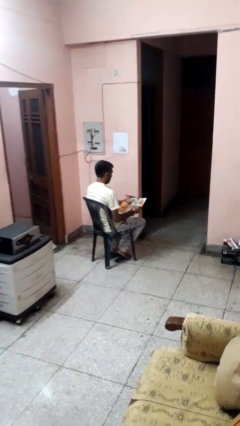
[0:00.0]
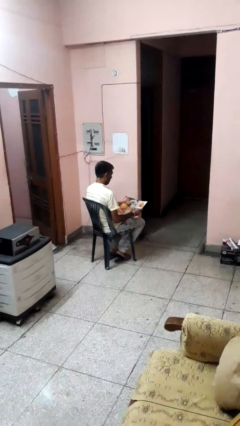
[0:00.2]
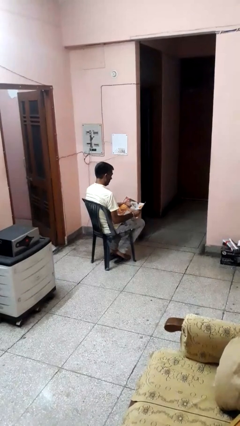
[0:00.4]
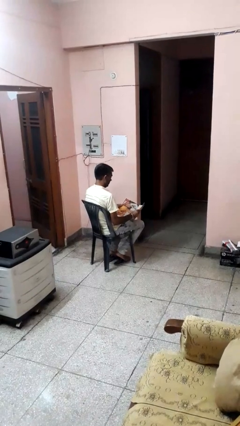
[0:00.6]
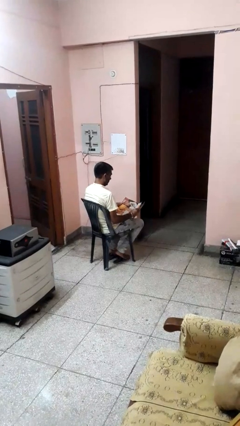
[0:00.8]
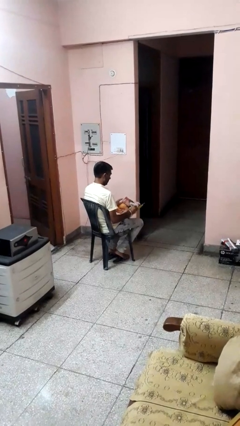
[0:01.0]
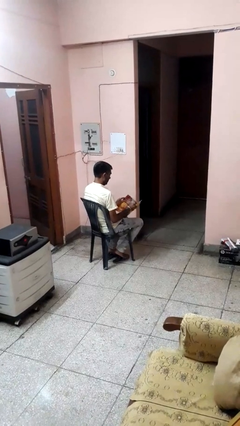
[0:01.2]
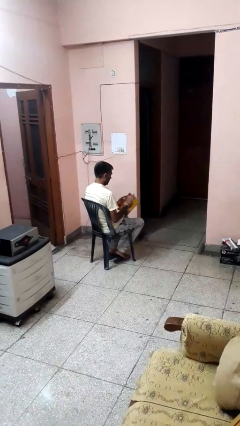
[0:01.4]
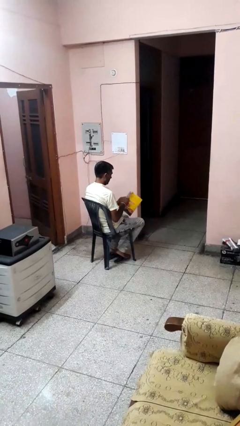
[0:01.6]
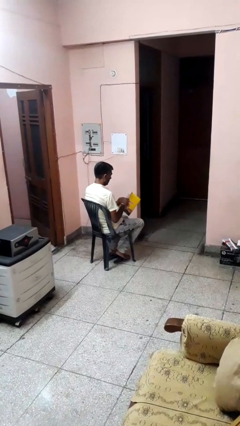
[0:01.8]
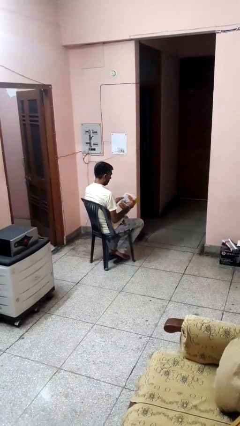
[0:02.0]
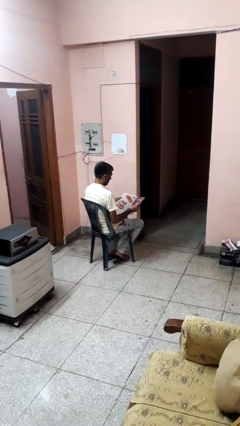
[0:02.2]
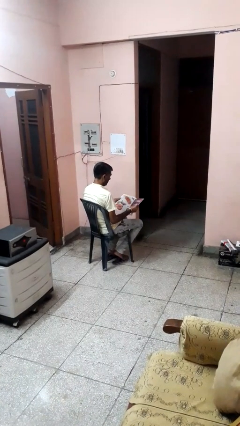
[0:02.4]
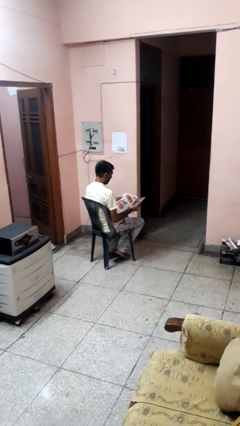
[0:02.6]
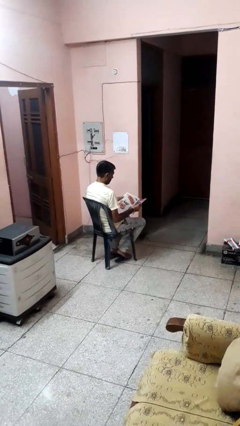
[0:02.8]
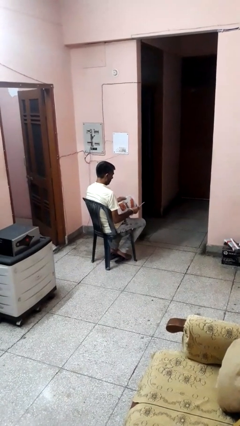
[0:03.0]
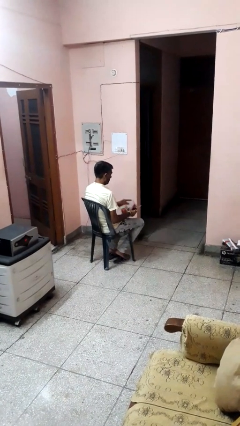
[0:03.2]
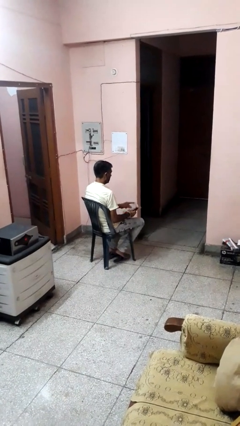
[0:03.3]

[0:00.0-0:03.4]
person reads magazine

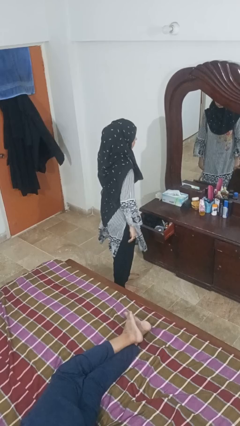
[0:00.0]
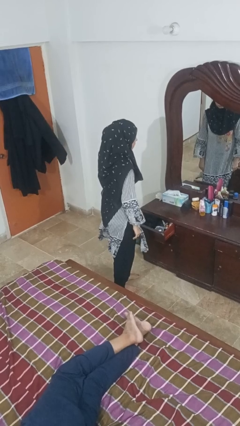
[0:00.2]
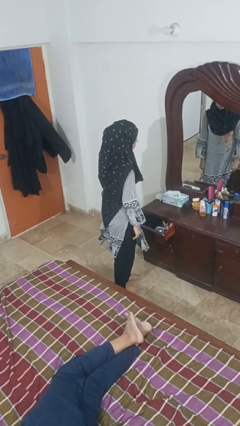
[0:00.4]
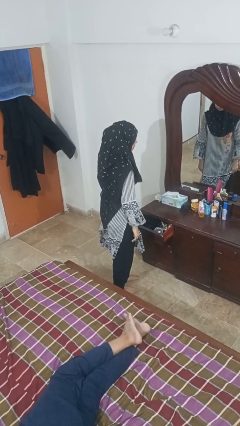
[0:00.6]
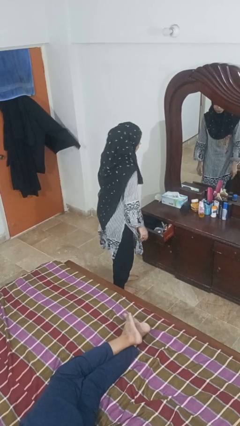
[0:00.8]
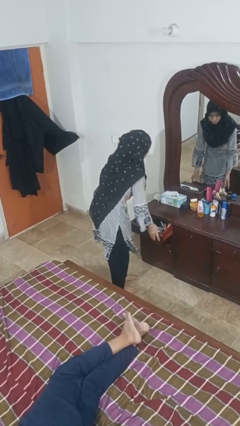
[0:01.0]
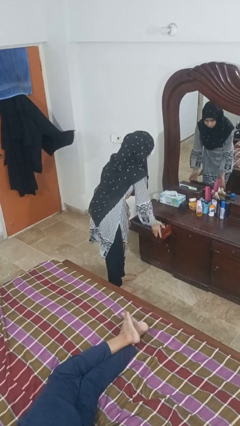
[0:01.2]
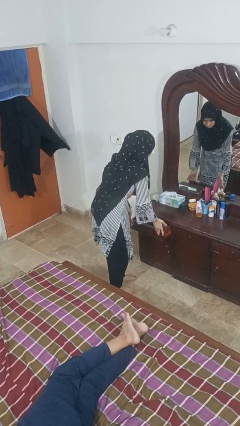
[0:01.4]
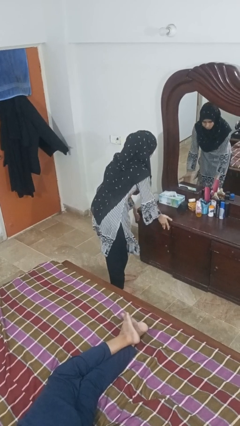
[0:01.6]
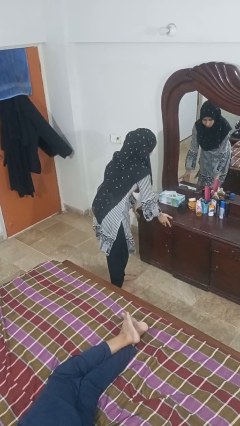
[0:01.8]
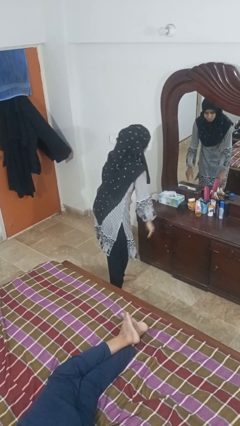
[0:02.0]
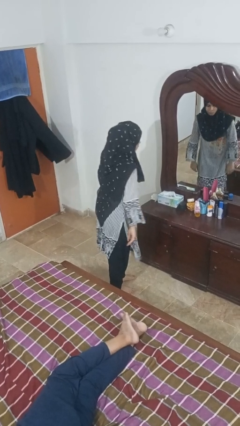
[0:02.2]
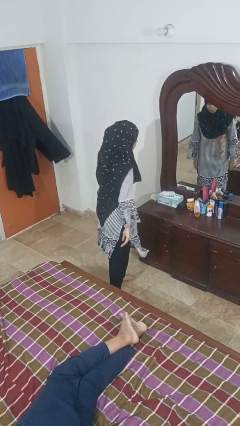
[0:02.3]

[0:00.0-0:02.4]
person closes dresser drawer

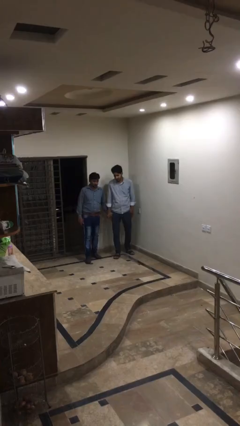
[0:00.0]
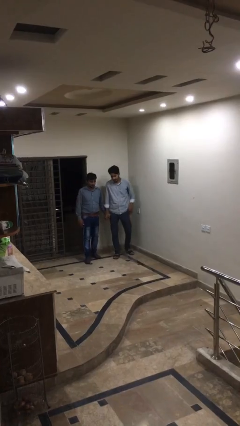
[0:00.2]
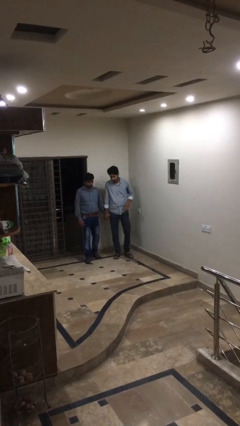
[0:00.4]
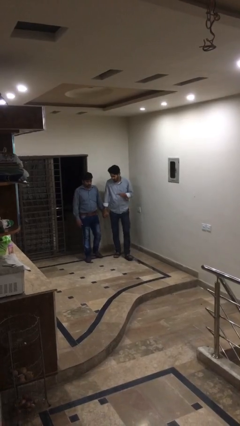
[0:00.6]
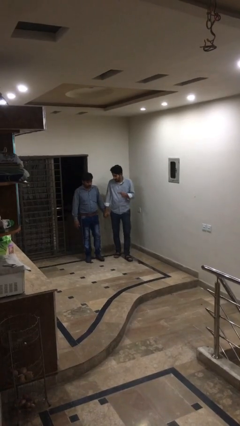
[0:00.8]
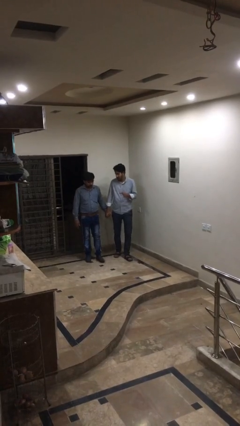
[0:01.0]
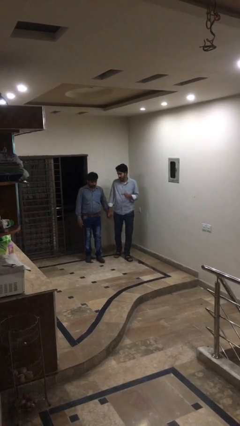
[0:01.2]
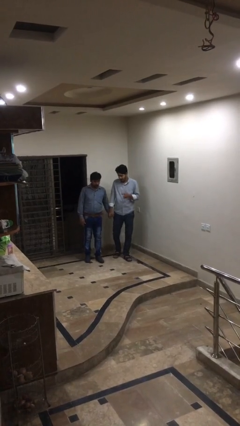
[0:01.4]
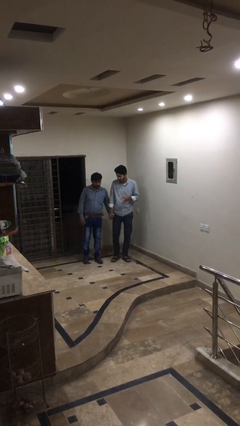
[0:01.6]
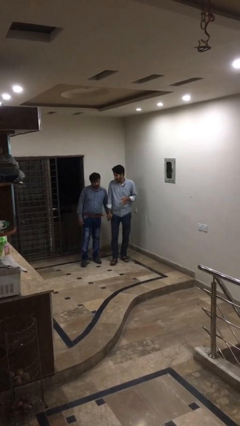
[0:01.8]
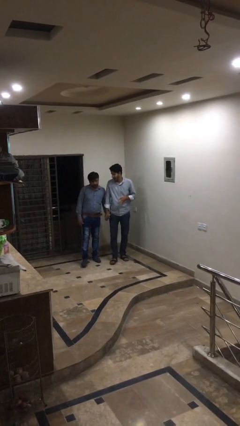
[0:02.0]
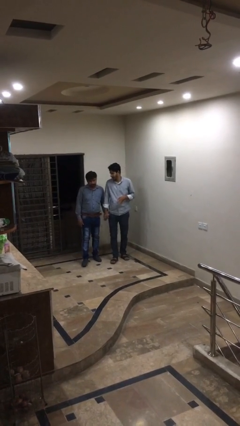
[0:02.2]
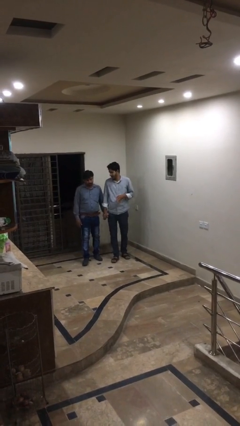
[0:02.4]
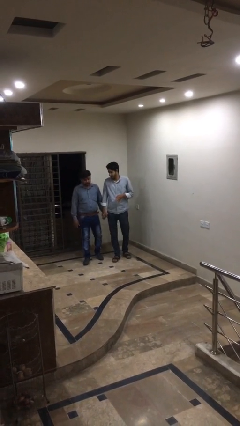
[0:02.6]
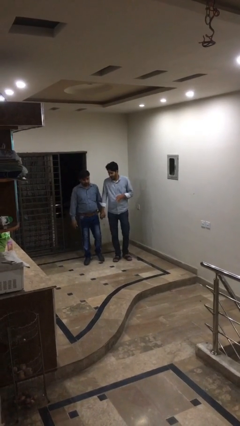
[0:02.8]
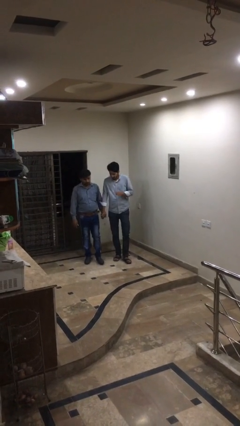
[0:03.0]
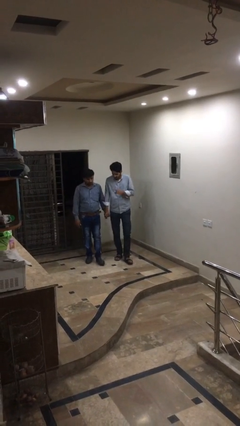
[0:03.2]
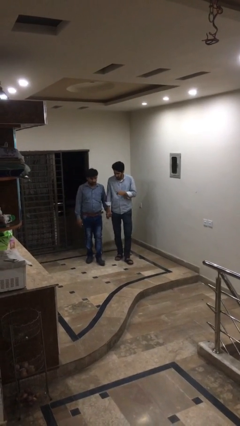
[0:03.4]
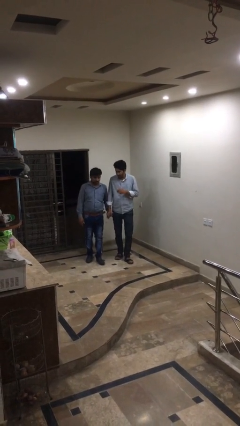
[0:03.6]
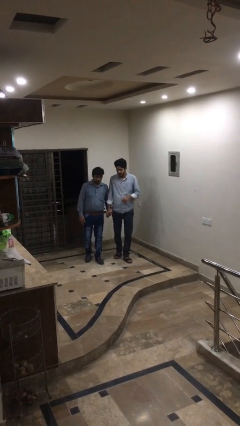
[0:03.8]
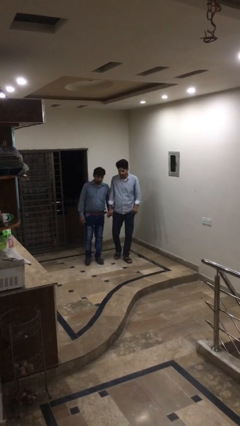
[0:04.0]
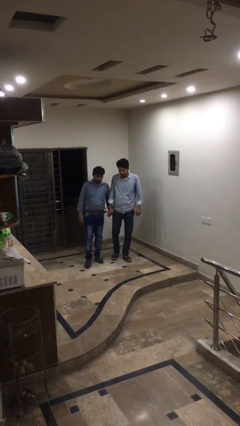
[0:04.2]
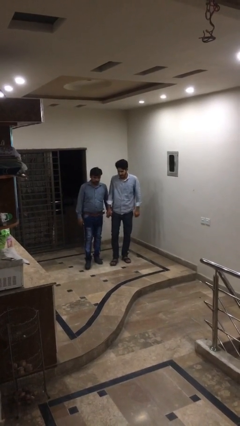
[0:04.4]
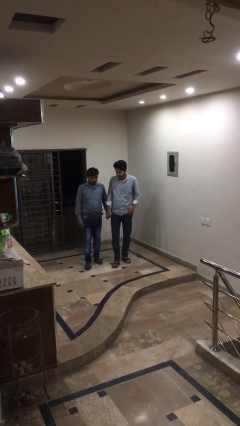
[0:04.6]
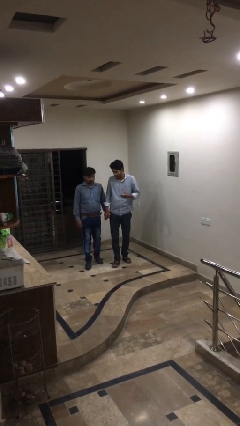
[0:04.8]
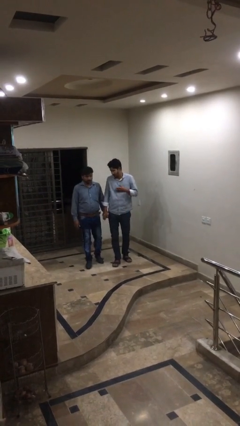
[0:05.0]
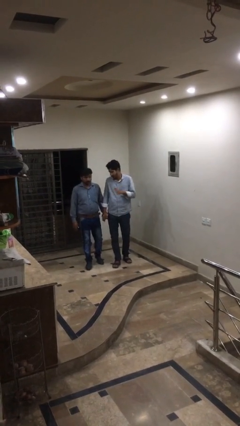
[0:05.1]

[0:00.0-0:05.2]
person holds hand

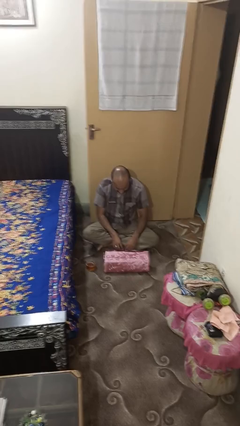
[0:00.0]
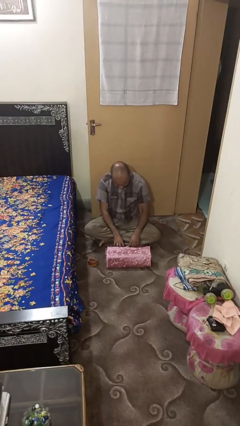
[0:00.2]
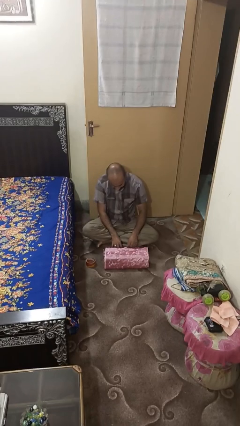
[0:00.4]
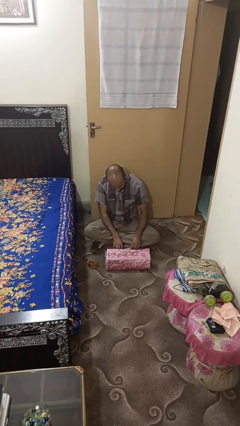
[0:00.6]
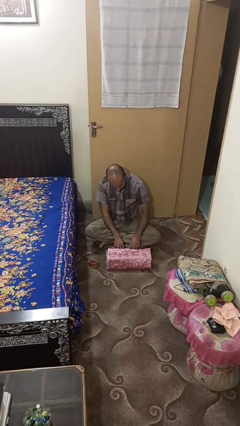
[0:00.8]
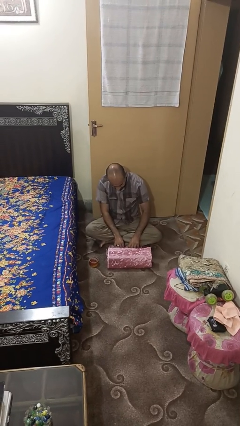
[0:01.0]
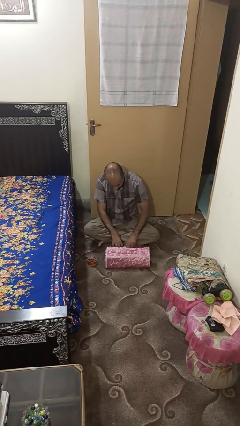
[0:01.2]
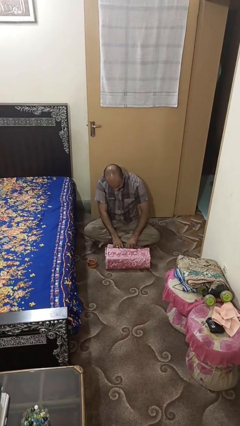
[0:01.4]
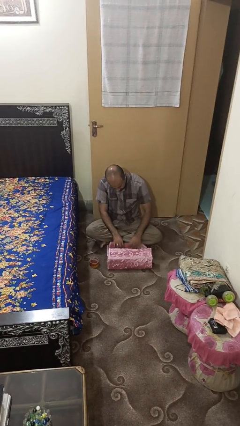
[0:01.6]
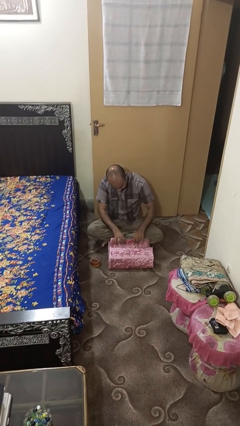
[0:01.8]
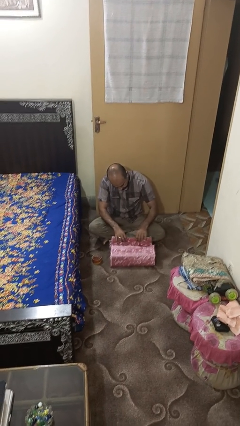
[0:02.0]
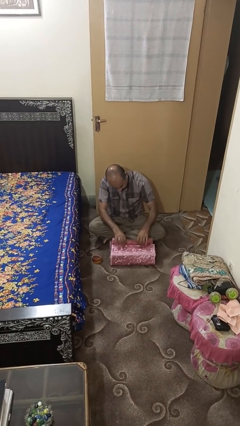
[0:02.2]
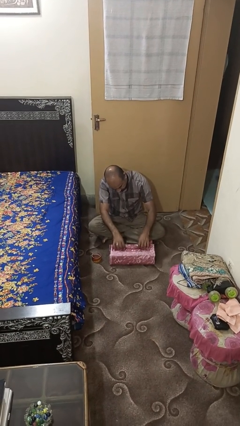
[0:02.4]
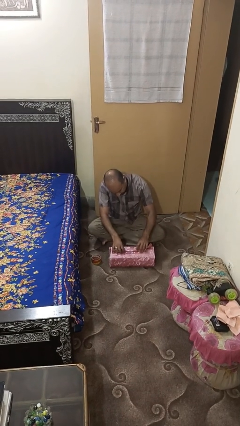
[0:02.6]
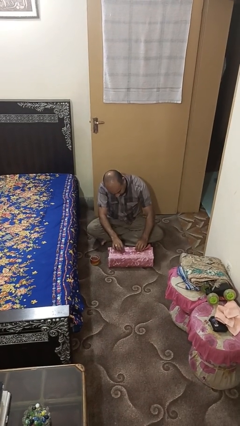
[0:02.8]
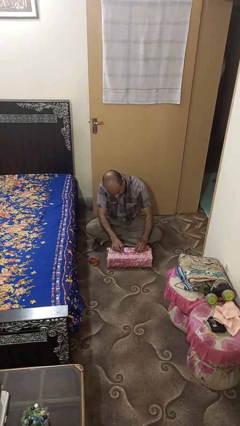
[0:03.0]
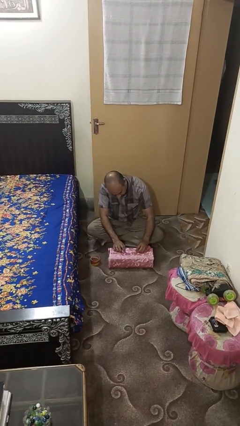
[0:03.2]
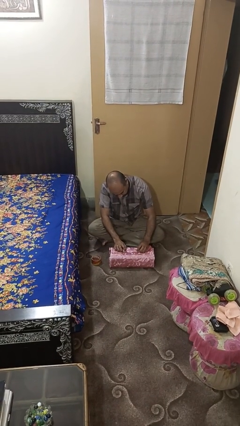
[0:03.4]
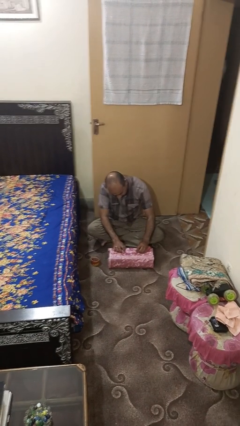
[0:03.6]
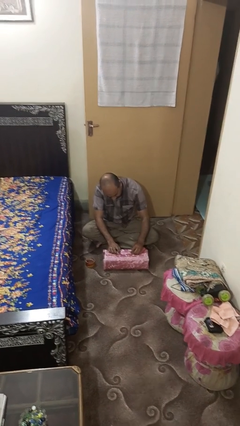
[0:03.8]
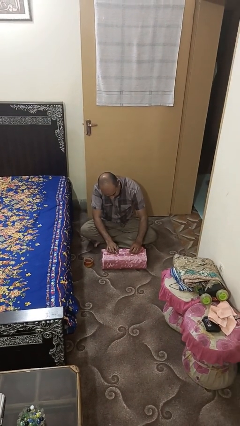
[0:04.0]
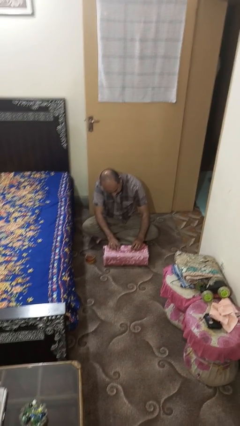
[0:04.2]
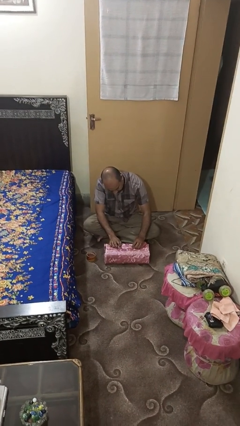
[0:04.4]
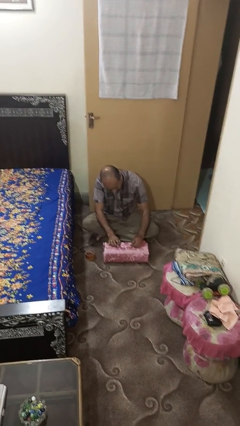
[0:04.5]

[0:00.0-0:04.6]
person wraps box

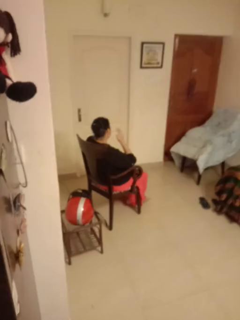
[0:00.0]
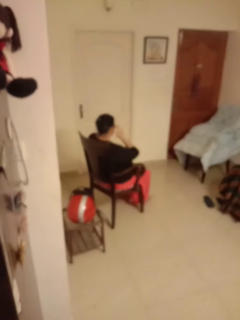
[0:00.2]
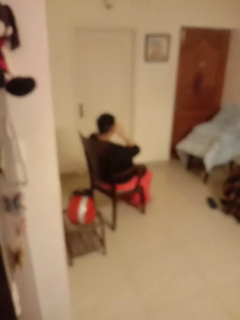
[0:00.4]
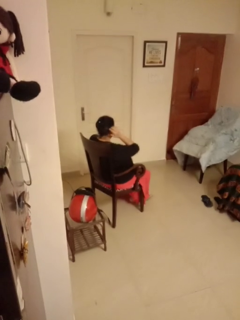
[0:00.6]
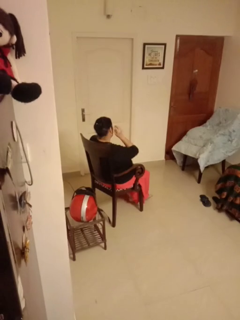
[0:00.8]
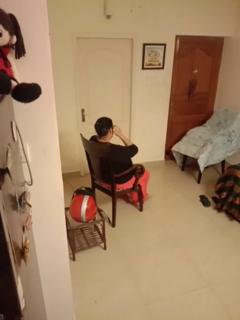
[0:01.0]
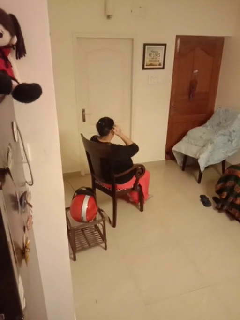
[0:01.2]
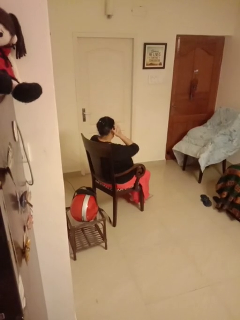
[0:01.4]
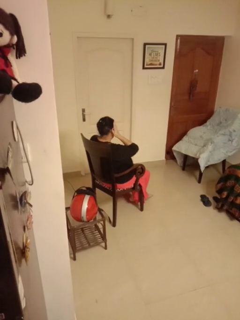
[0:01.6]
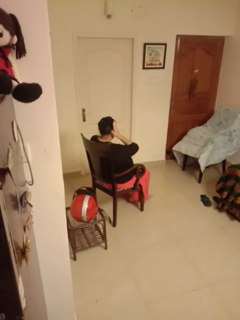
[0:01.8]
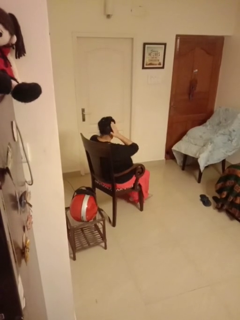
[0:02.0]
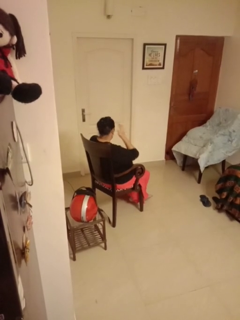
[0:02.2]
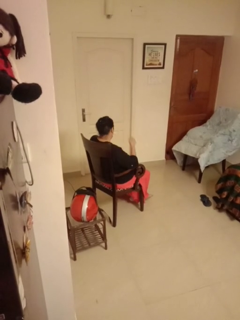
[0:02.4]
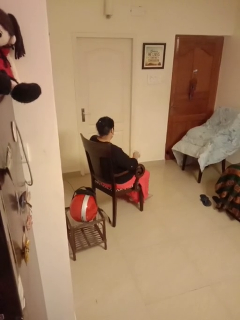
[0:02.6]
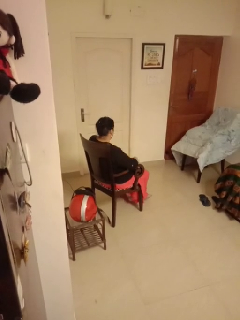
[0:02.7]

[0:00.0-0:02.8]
person strokes hair
